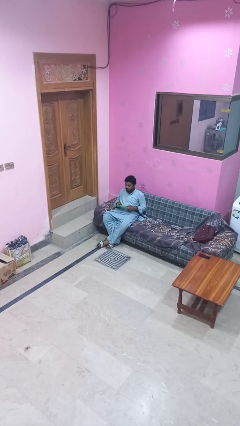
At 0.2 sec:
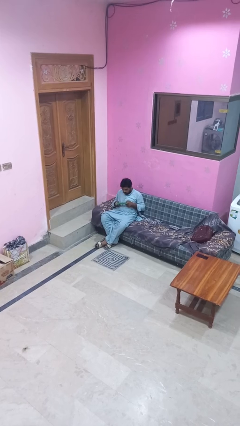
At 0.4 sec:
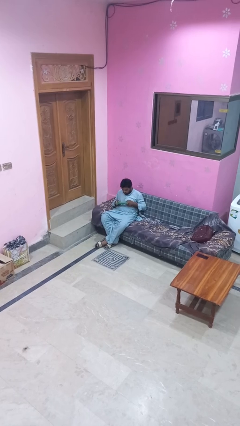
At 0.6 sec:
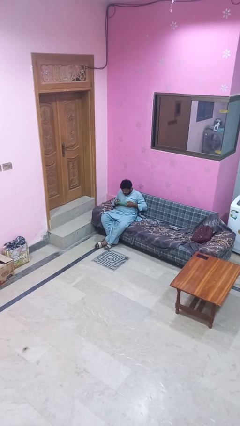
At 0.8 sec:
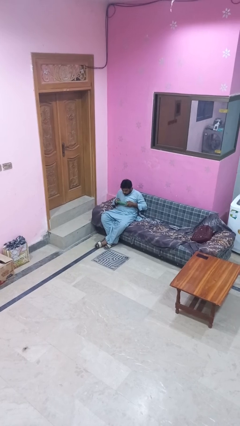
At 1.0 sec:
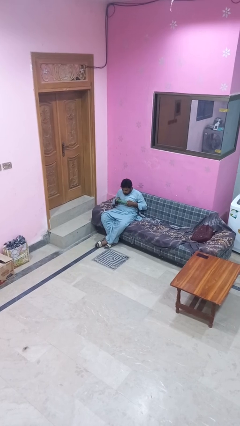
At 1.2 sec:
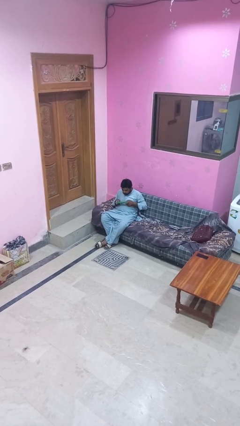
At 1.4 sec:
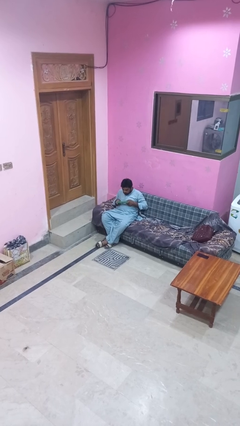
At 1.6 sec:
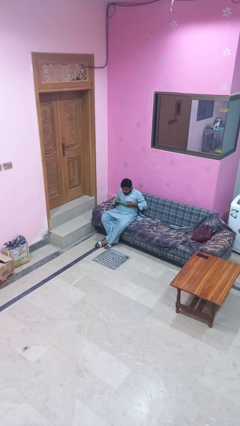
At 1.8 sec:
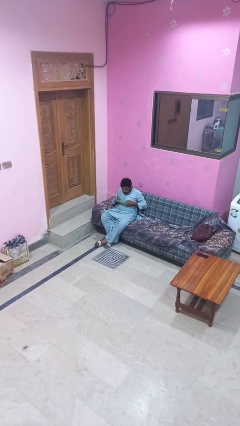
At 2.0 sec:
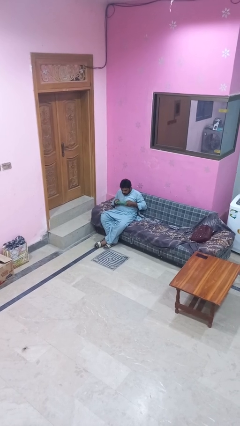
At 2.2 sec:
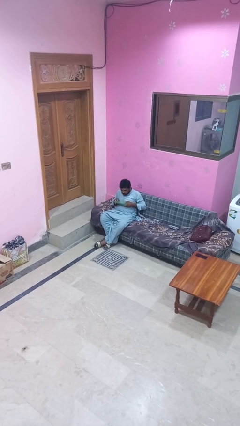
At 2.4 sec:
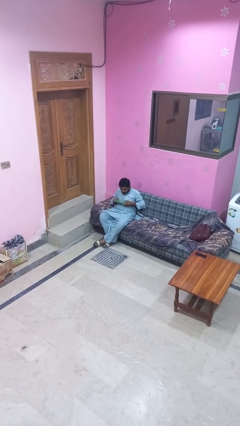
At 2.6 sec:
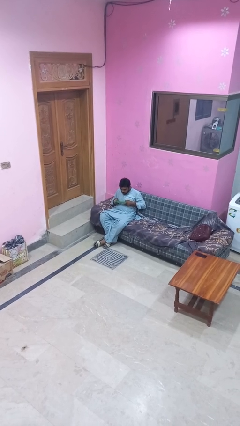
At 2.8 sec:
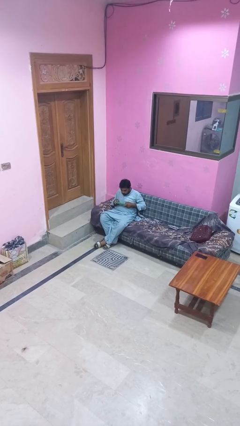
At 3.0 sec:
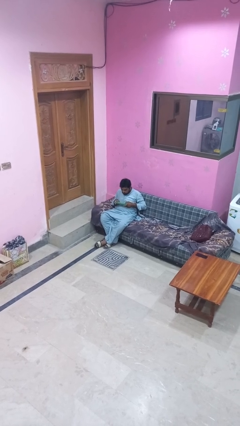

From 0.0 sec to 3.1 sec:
person interacts with handheld game

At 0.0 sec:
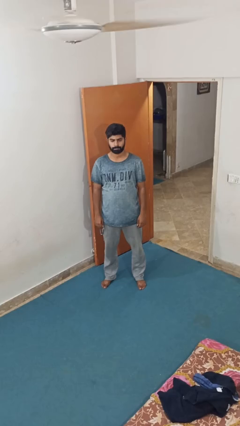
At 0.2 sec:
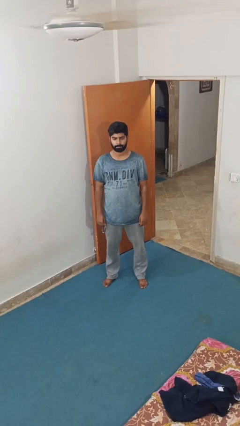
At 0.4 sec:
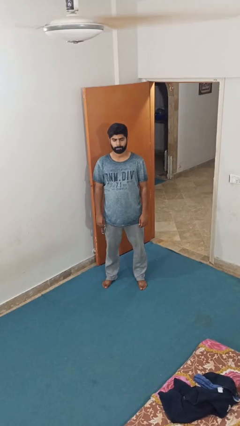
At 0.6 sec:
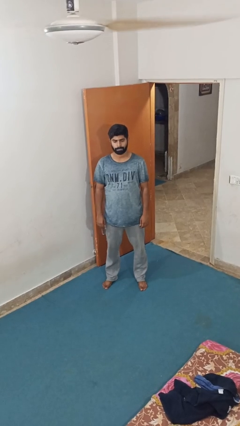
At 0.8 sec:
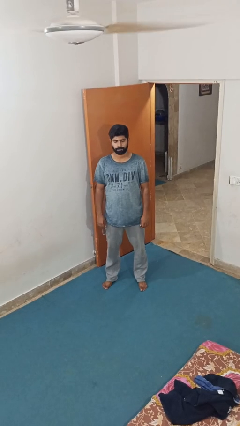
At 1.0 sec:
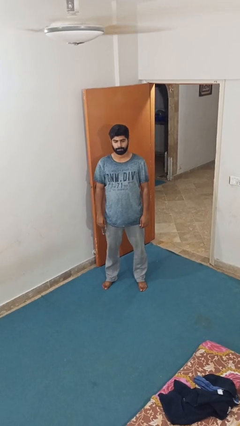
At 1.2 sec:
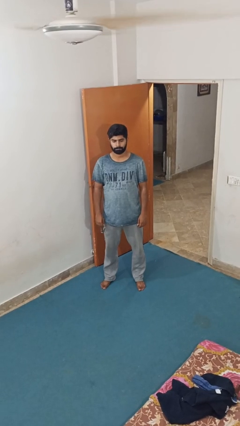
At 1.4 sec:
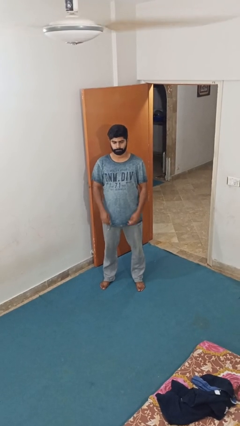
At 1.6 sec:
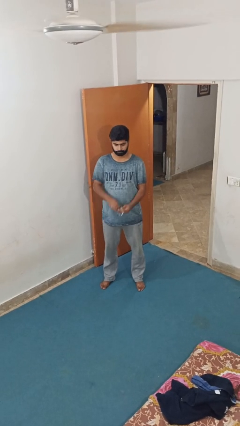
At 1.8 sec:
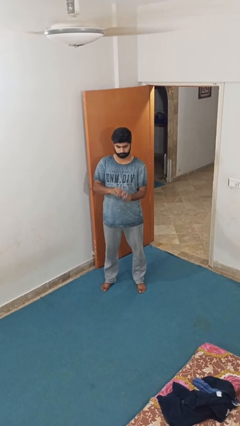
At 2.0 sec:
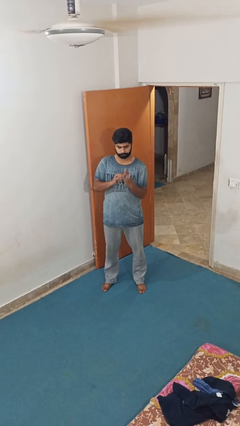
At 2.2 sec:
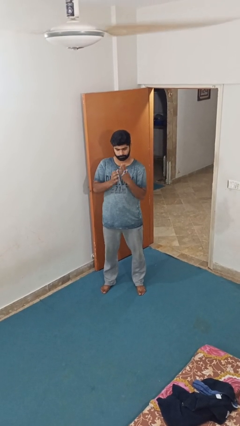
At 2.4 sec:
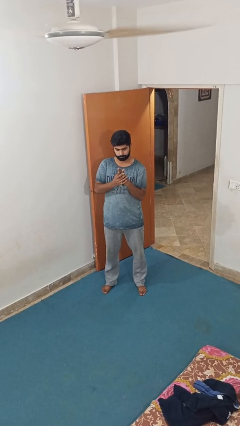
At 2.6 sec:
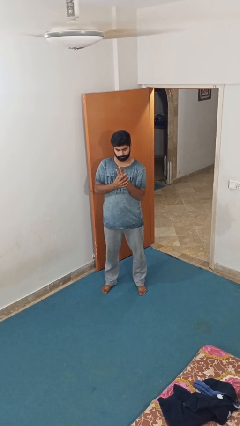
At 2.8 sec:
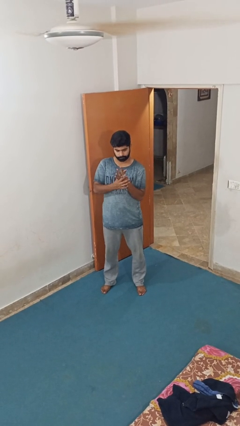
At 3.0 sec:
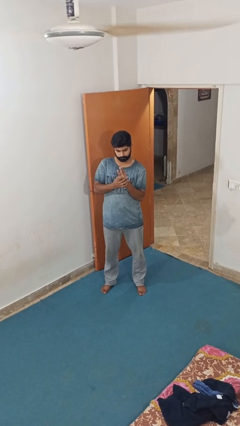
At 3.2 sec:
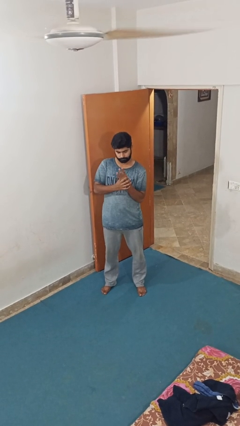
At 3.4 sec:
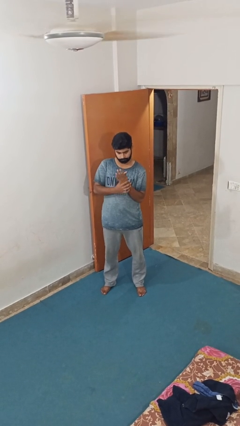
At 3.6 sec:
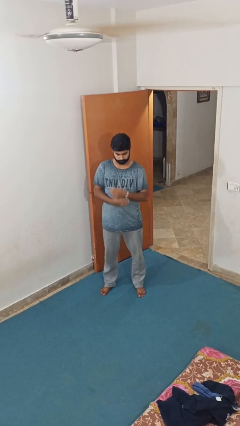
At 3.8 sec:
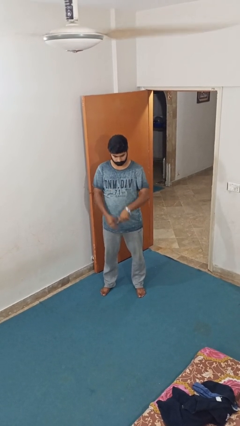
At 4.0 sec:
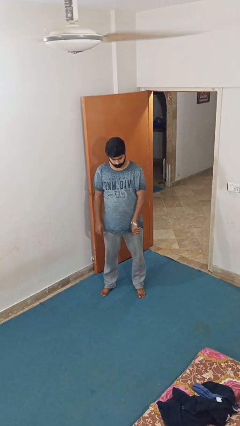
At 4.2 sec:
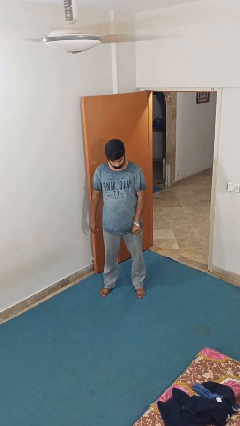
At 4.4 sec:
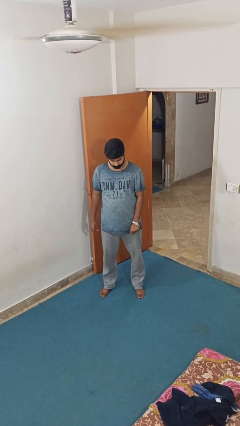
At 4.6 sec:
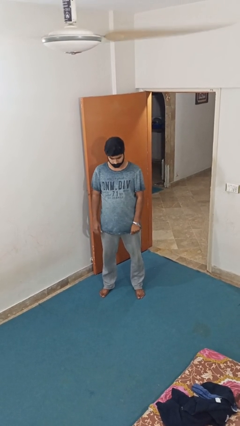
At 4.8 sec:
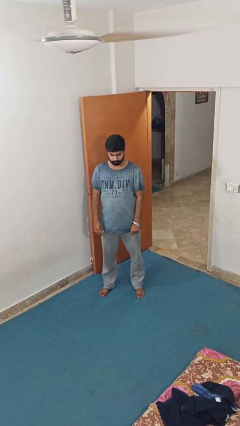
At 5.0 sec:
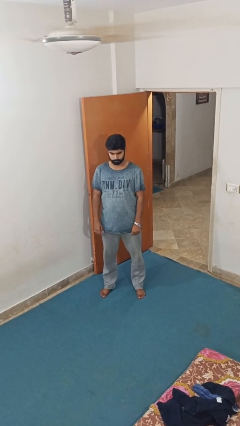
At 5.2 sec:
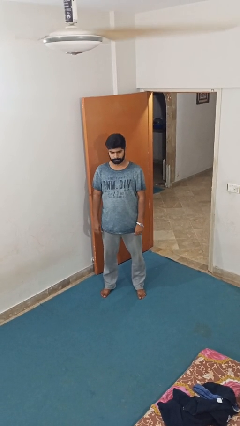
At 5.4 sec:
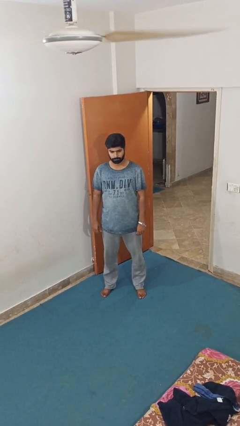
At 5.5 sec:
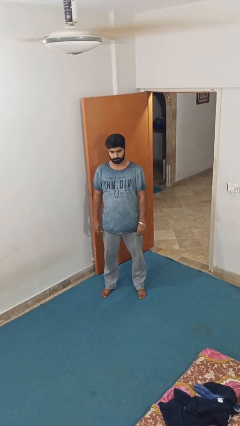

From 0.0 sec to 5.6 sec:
person puts on wristwatch

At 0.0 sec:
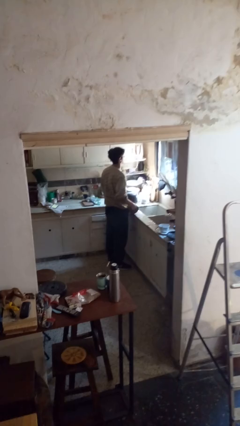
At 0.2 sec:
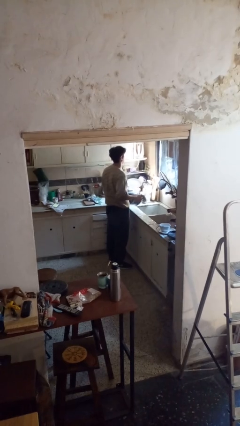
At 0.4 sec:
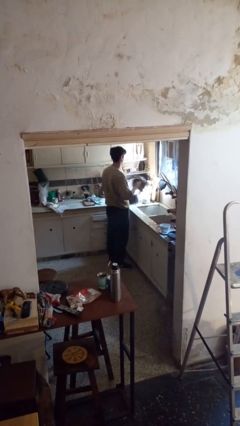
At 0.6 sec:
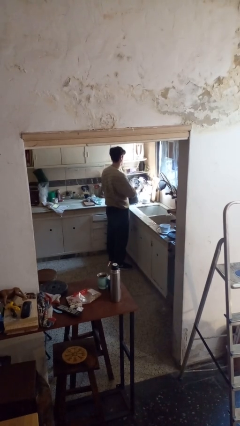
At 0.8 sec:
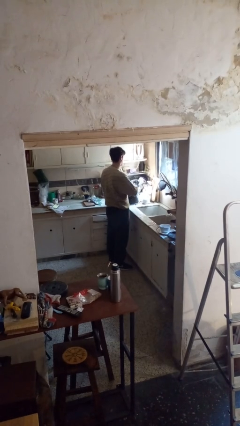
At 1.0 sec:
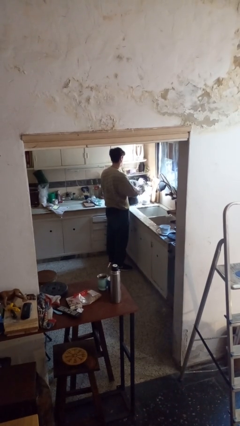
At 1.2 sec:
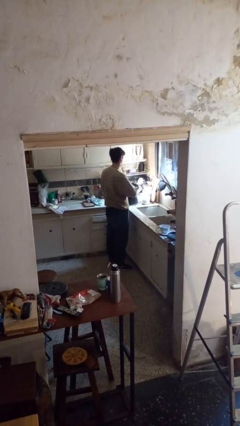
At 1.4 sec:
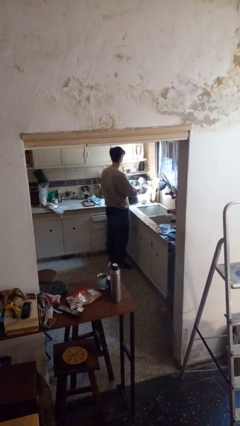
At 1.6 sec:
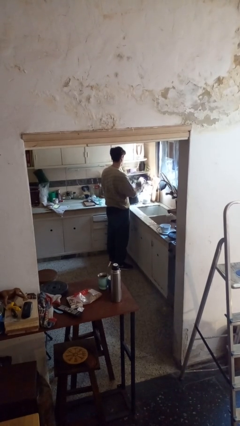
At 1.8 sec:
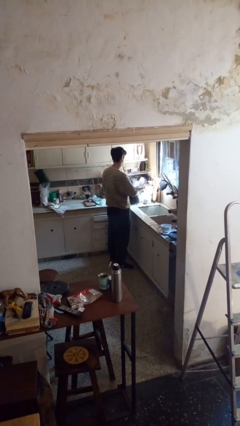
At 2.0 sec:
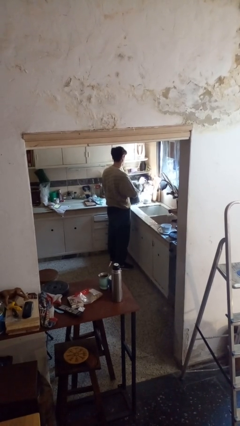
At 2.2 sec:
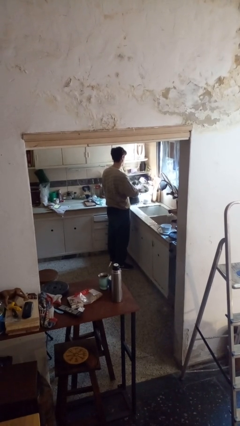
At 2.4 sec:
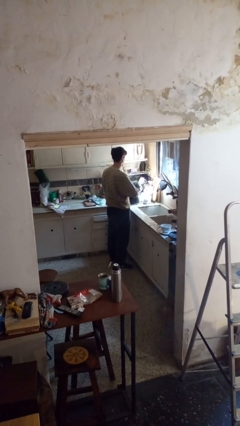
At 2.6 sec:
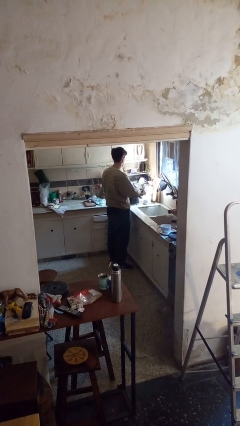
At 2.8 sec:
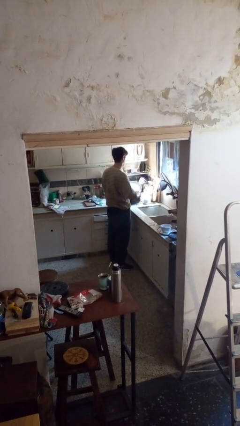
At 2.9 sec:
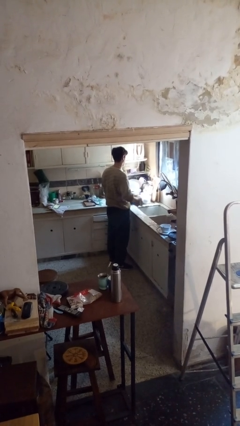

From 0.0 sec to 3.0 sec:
person dries dish

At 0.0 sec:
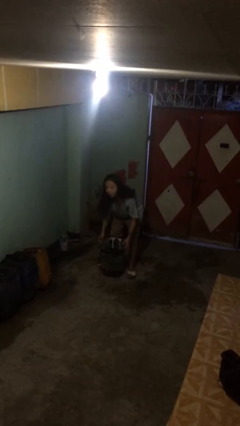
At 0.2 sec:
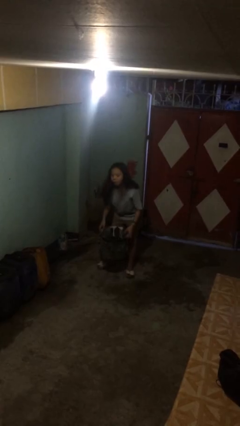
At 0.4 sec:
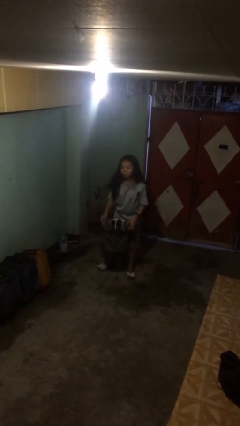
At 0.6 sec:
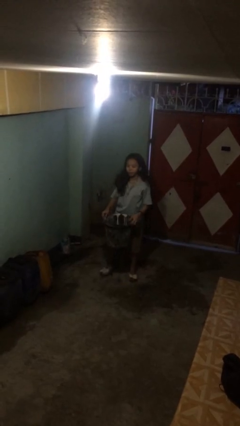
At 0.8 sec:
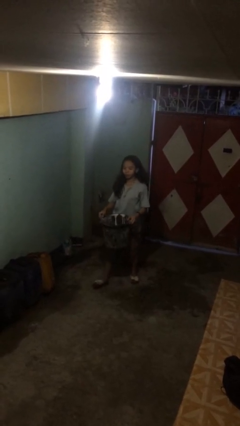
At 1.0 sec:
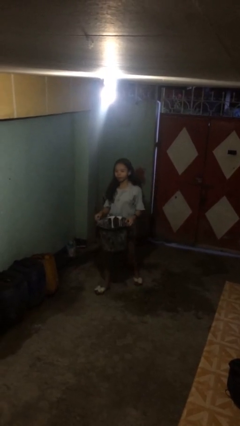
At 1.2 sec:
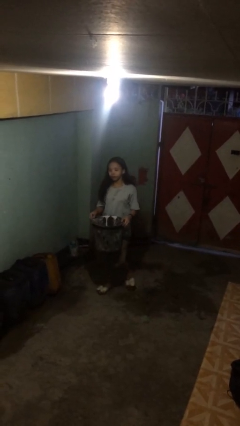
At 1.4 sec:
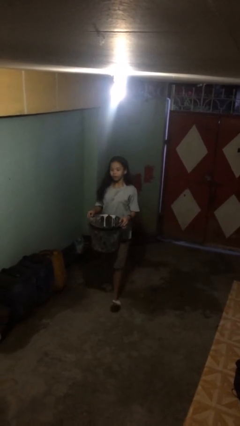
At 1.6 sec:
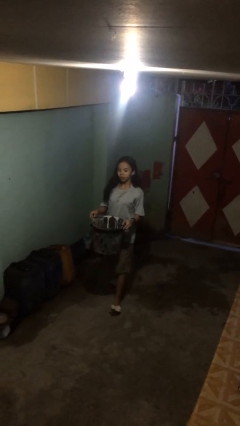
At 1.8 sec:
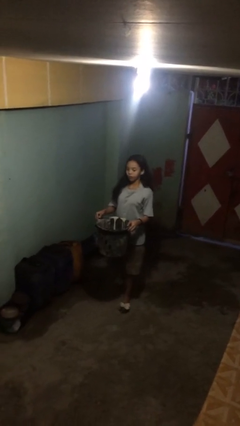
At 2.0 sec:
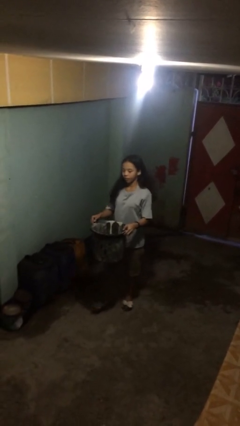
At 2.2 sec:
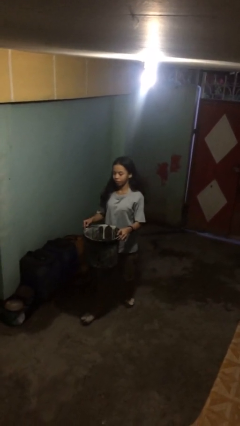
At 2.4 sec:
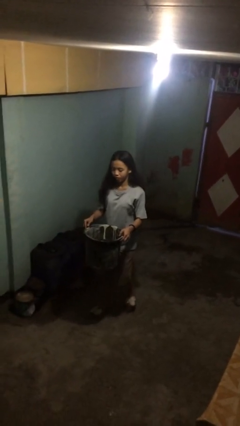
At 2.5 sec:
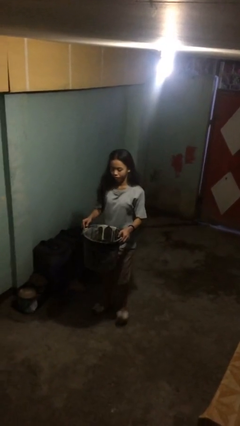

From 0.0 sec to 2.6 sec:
person carries heavy object

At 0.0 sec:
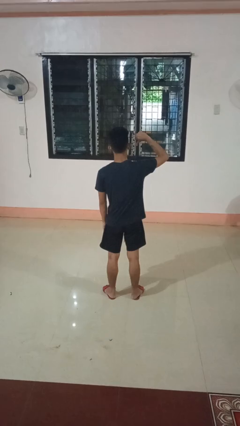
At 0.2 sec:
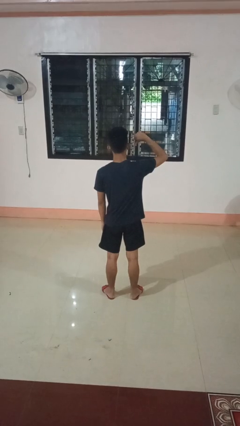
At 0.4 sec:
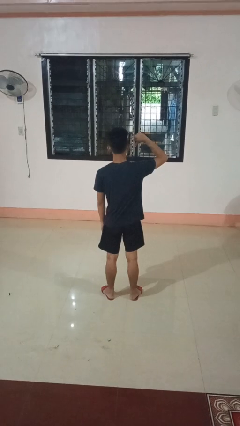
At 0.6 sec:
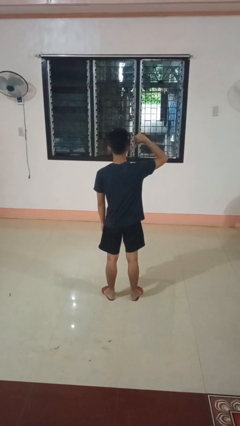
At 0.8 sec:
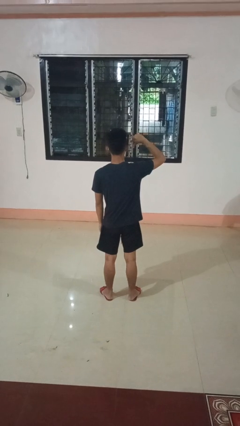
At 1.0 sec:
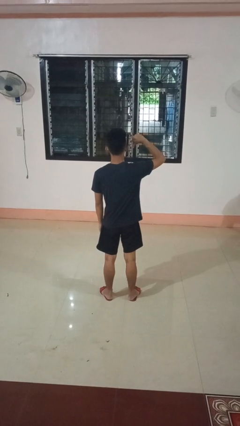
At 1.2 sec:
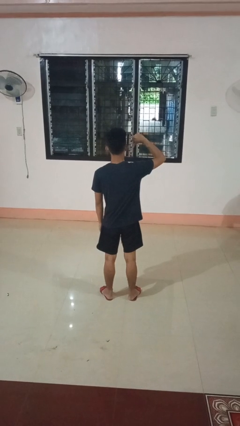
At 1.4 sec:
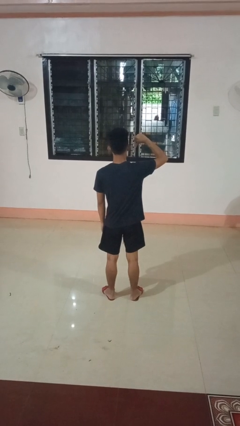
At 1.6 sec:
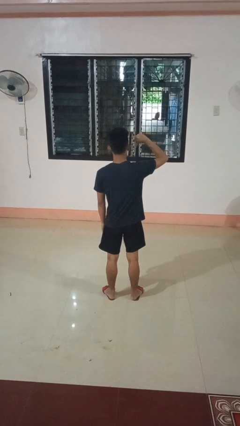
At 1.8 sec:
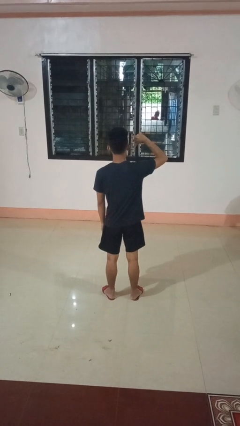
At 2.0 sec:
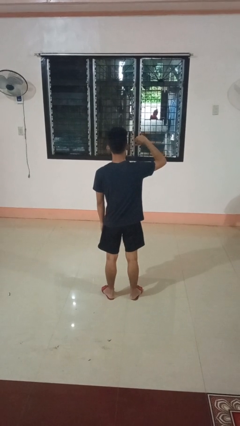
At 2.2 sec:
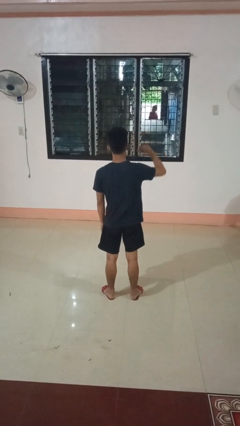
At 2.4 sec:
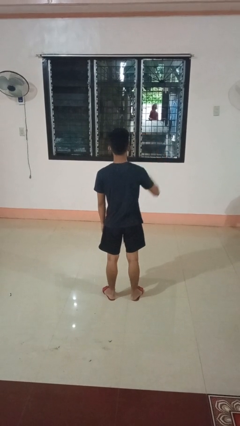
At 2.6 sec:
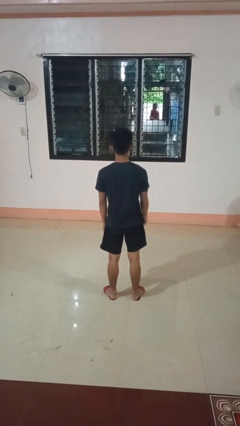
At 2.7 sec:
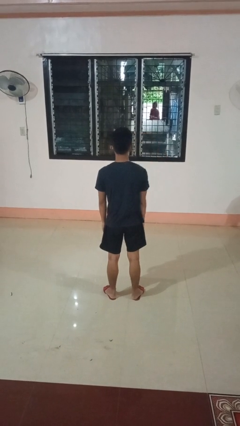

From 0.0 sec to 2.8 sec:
person gestures thumbs down

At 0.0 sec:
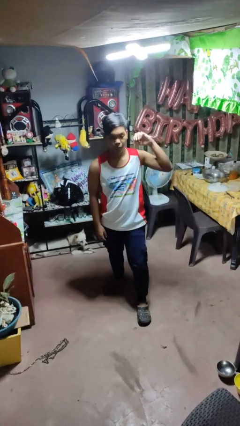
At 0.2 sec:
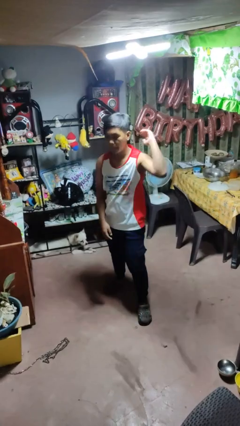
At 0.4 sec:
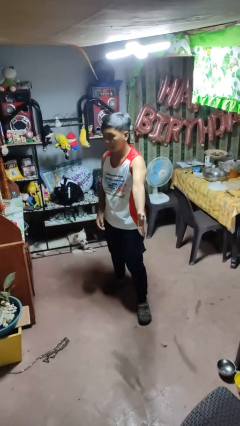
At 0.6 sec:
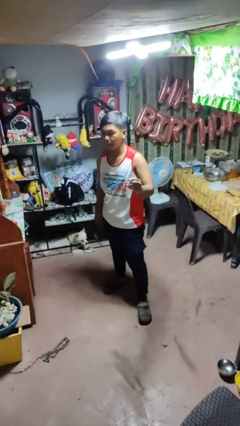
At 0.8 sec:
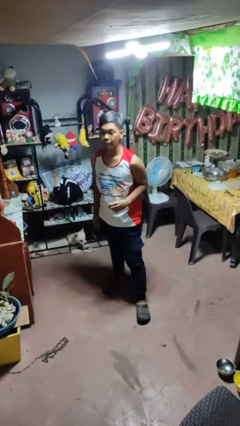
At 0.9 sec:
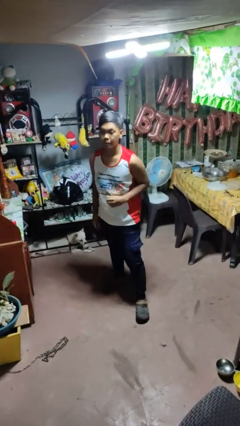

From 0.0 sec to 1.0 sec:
person karate chop
